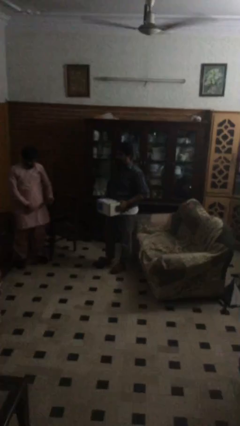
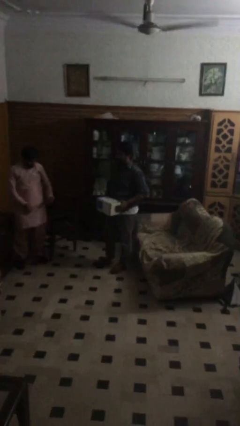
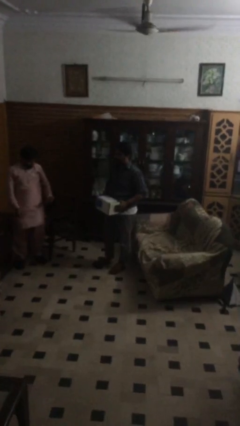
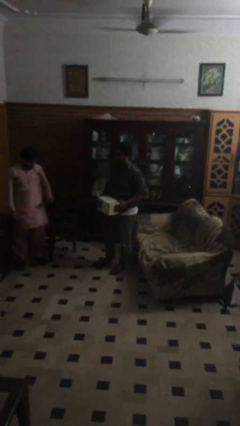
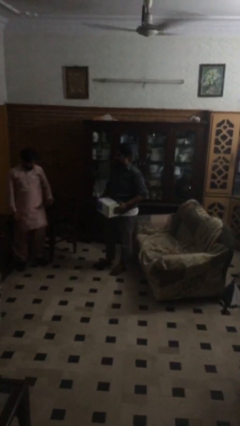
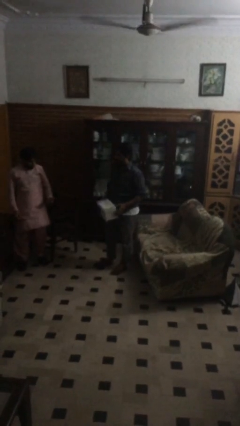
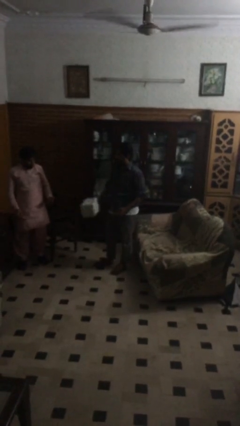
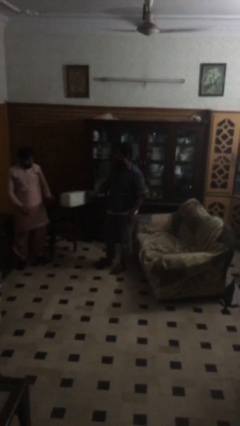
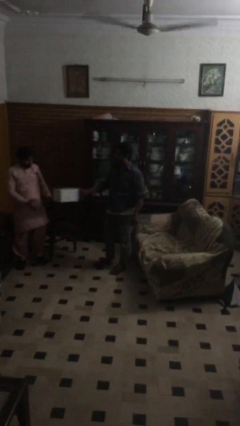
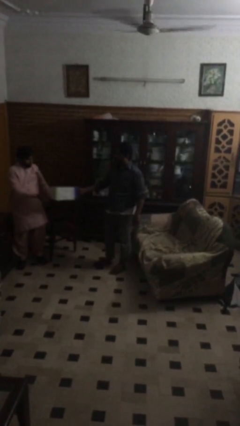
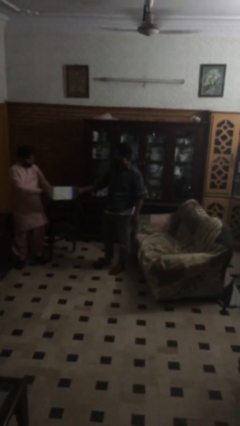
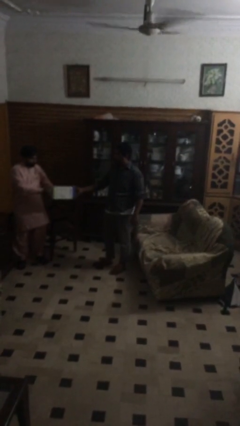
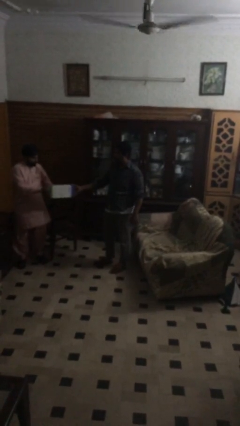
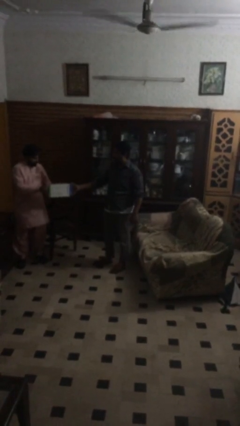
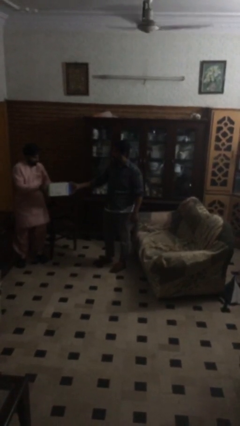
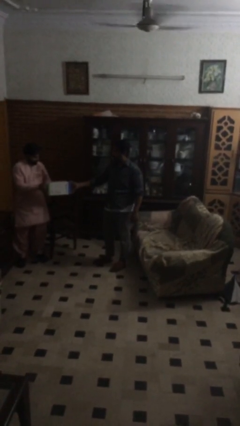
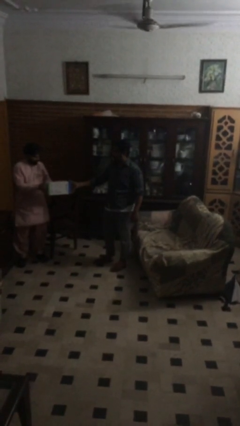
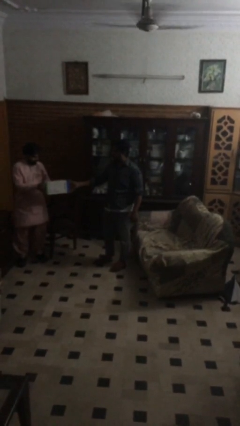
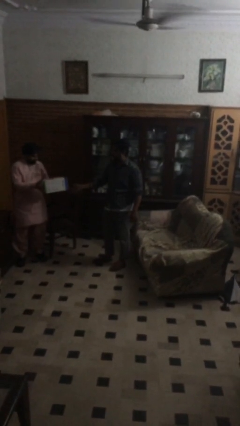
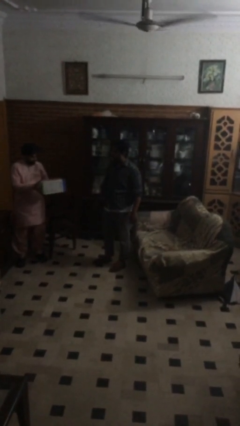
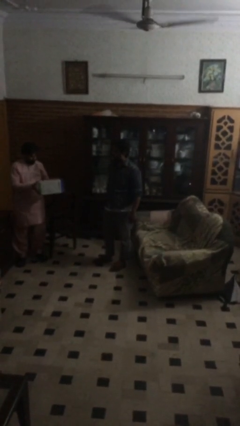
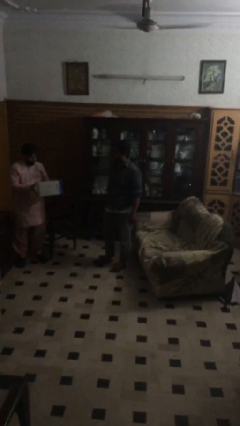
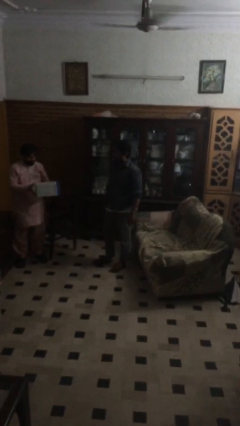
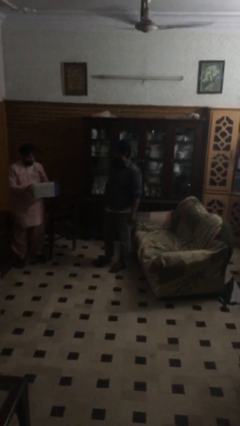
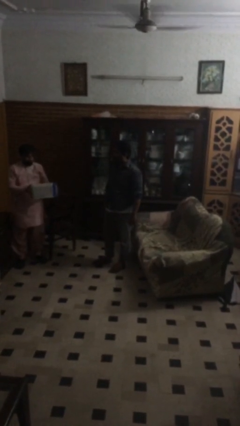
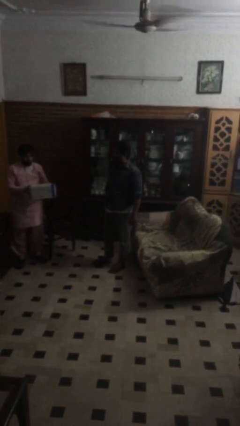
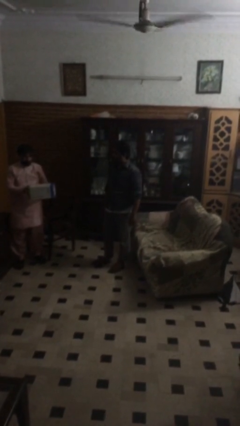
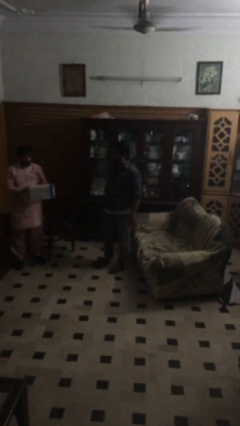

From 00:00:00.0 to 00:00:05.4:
person transfers object to person

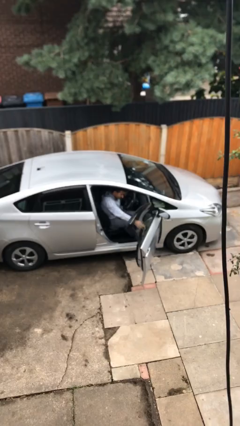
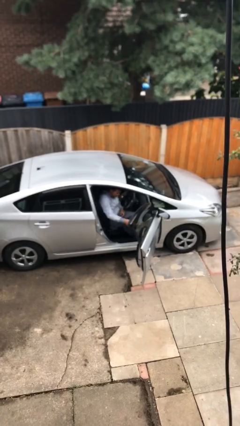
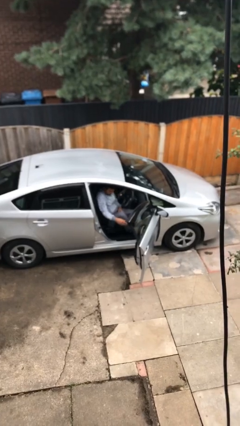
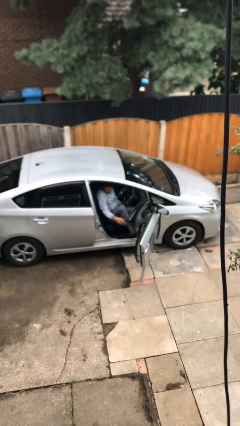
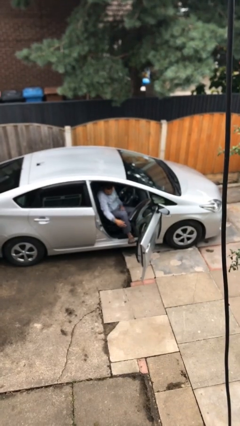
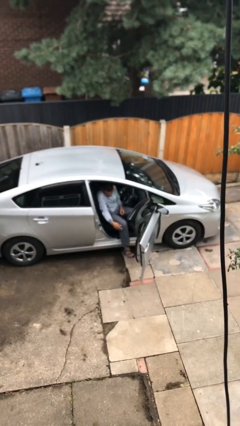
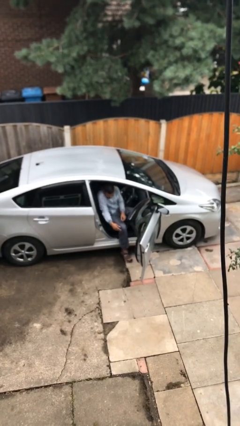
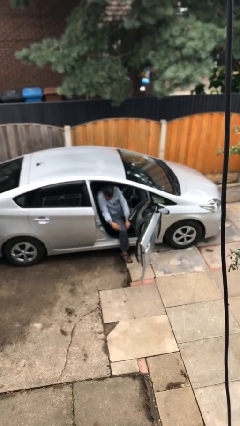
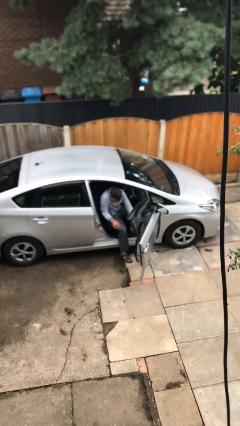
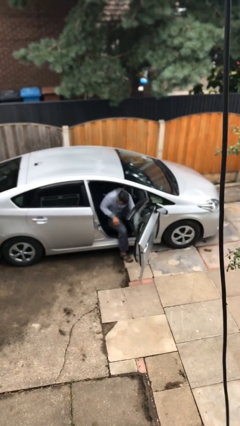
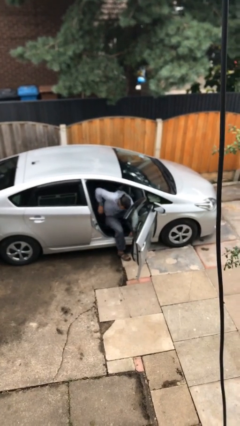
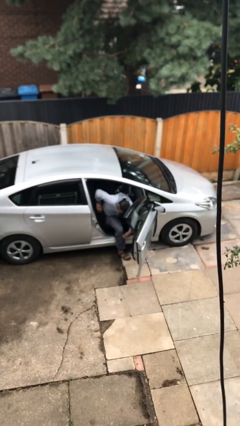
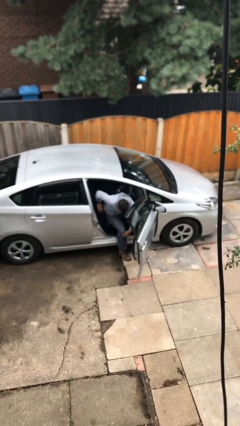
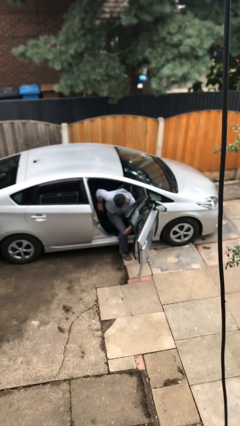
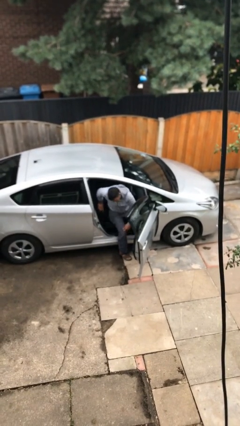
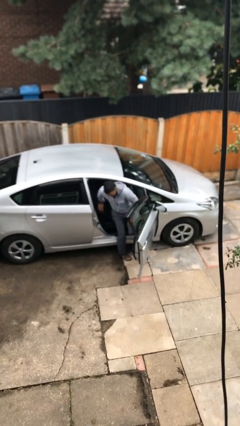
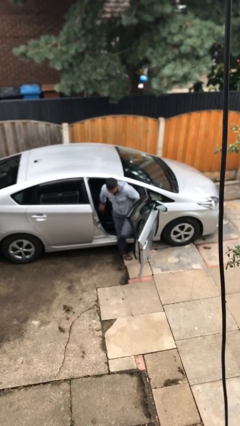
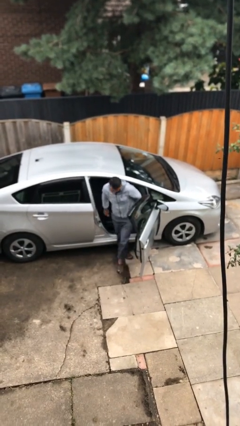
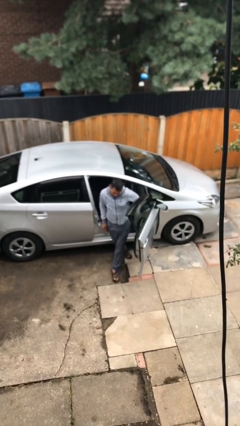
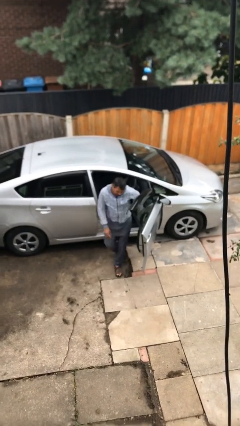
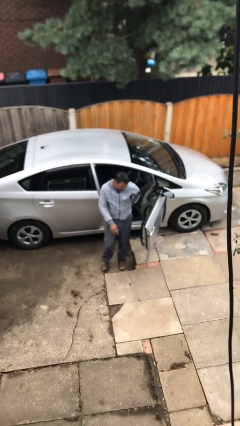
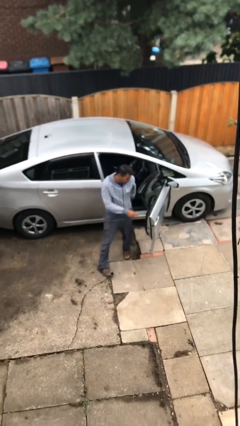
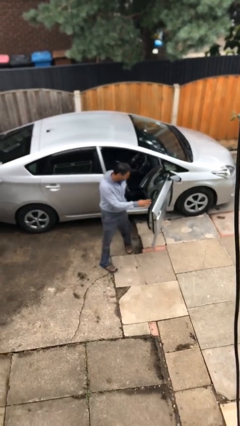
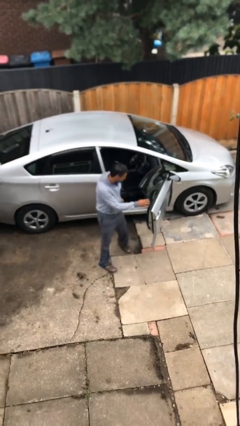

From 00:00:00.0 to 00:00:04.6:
person exits car

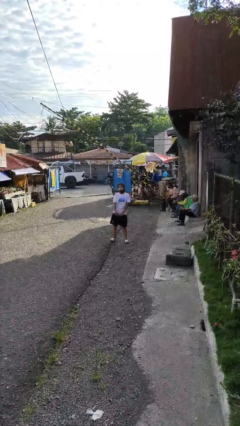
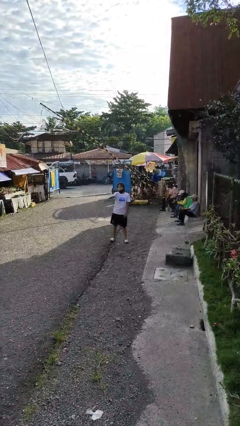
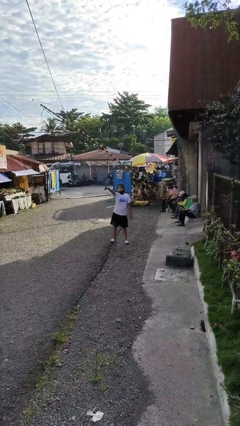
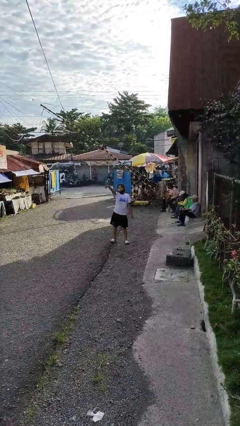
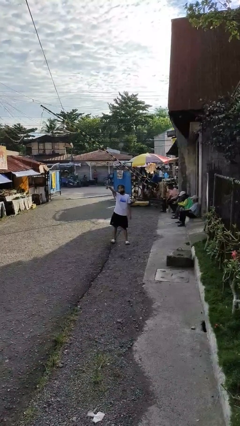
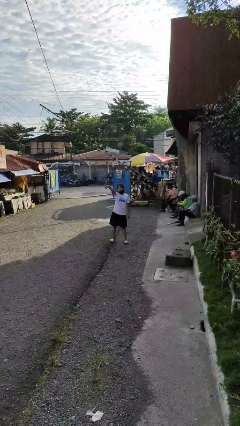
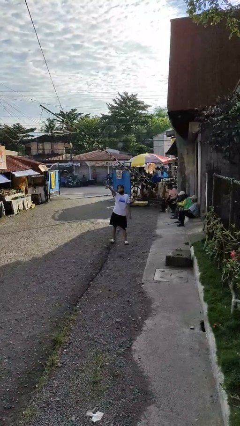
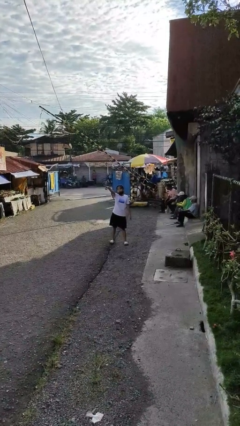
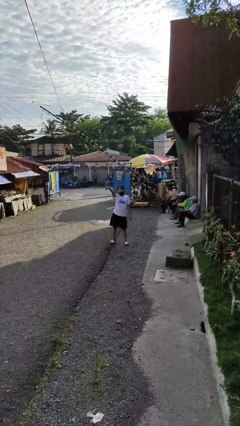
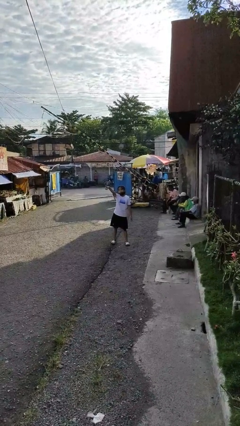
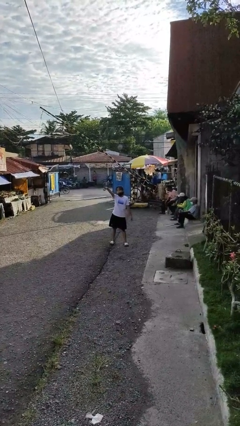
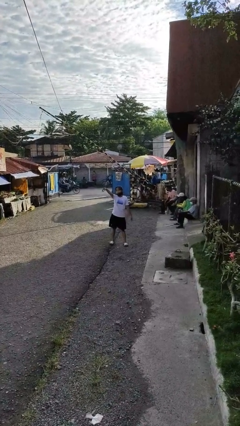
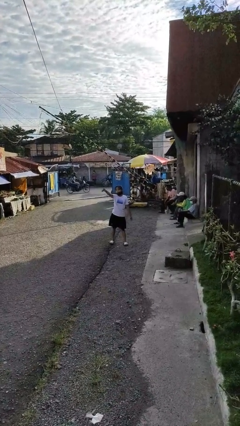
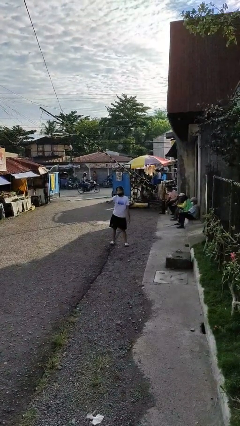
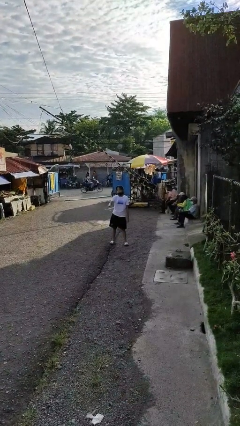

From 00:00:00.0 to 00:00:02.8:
person points at person

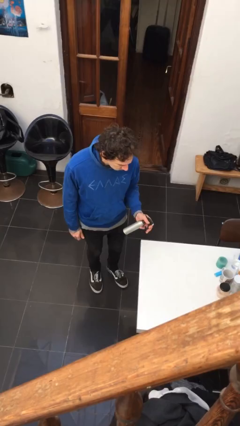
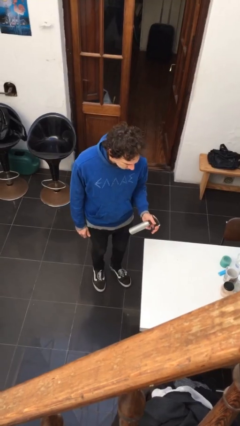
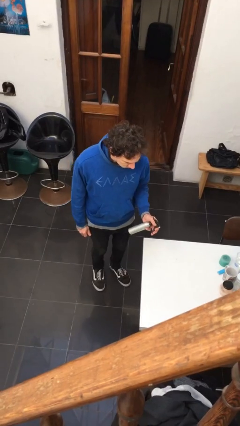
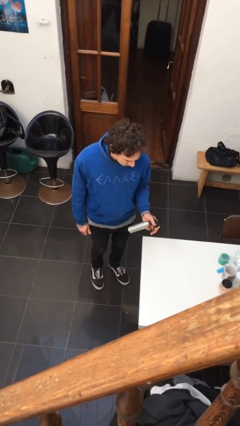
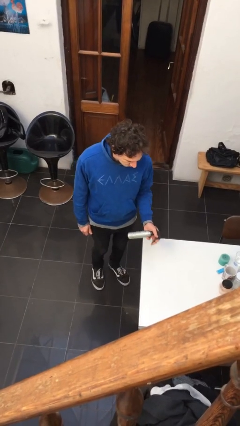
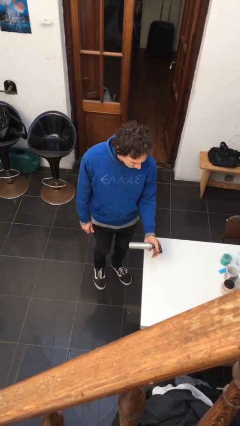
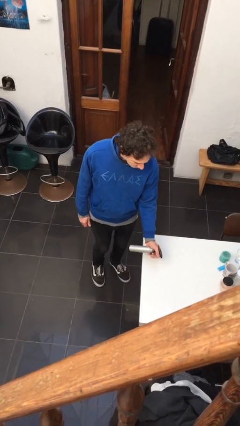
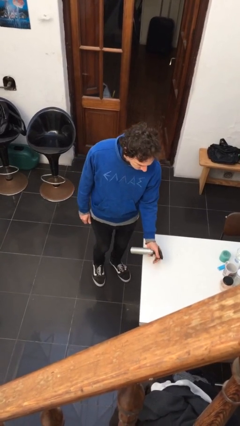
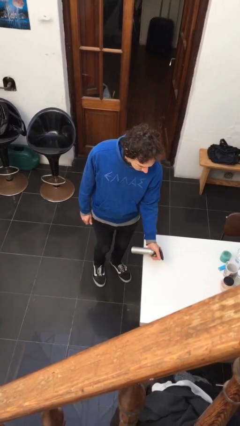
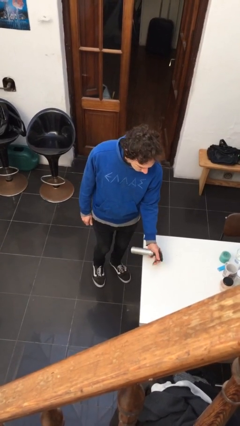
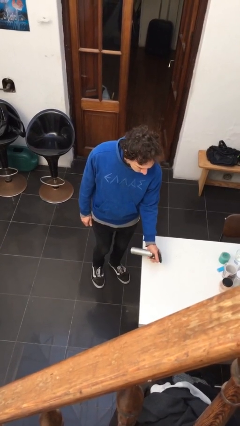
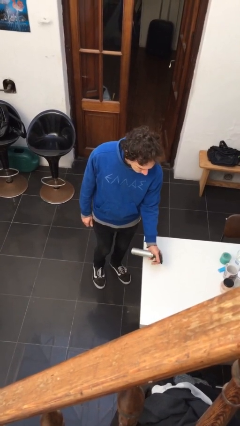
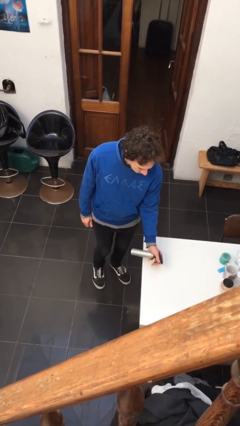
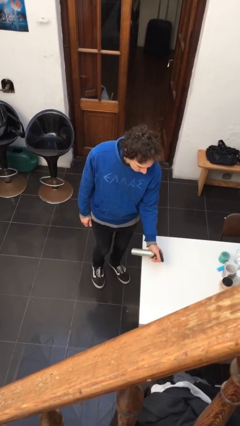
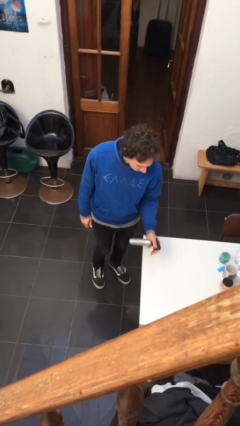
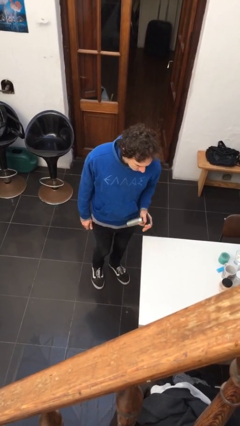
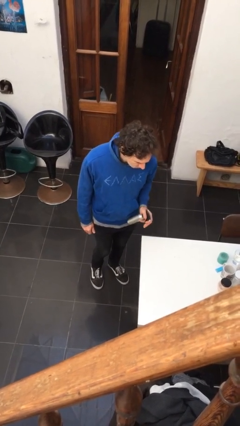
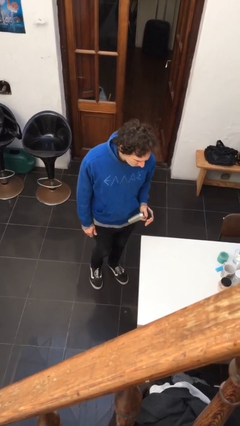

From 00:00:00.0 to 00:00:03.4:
person sprays from bottle

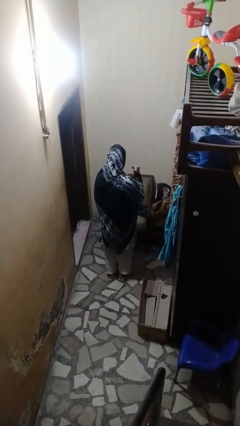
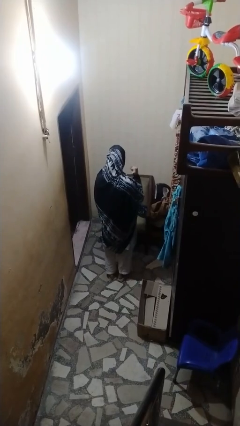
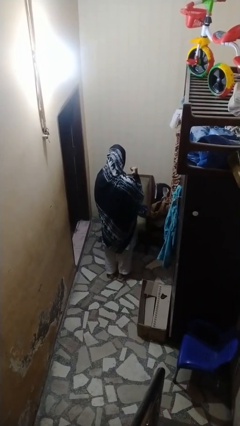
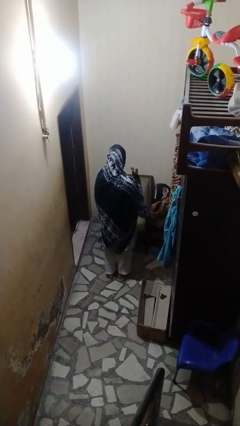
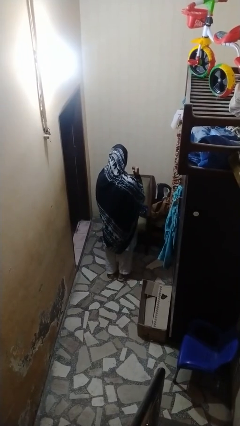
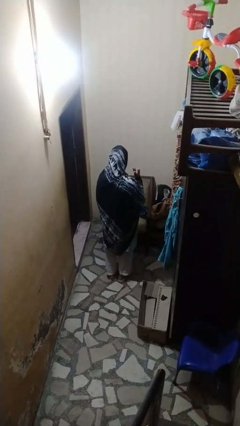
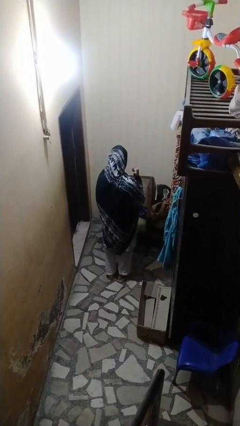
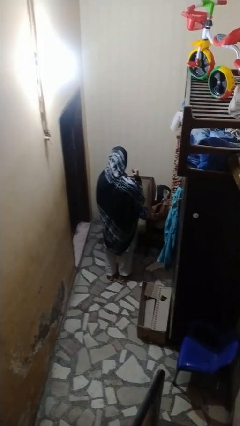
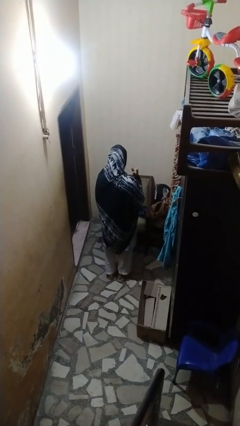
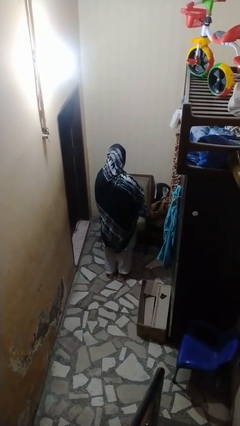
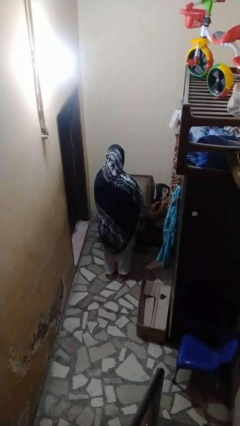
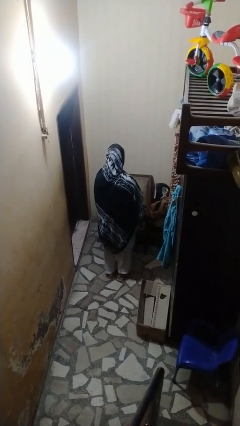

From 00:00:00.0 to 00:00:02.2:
person gestures behind me
